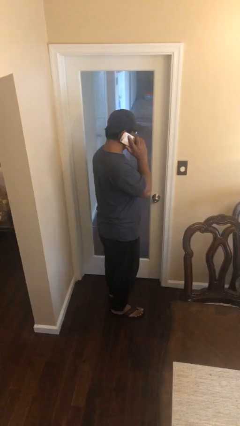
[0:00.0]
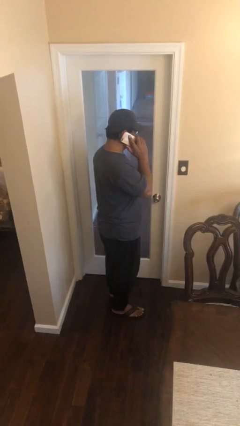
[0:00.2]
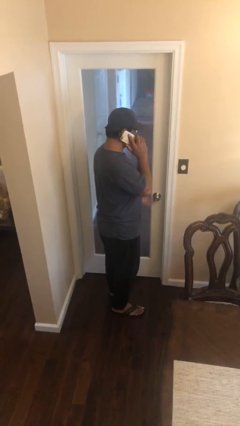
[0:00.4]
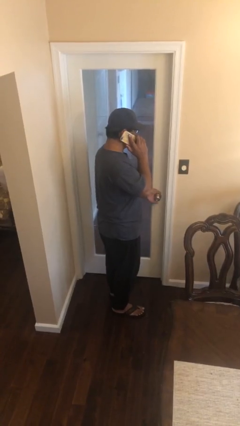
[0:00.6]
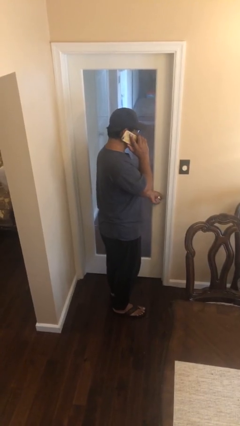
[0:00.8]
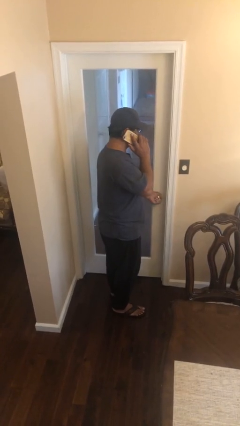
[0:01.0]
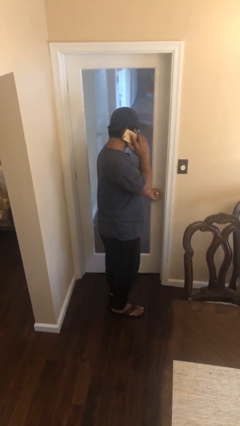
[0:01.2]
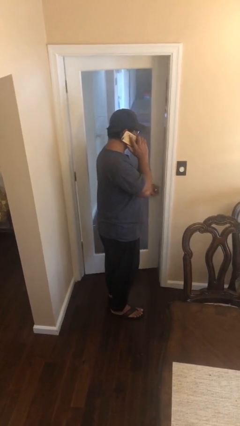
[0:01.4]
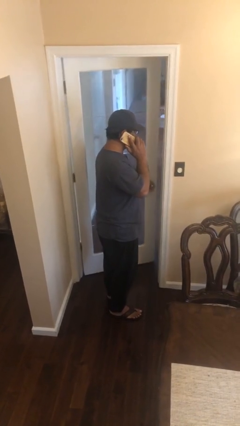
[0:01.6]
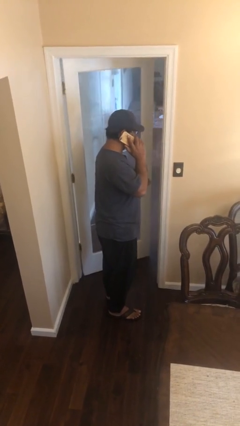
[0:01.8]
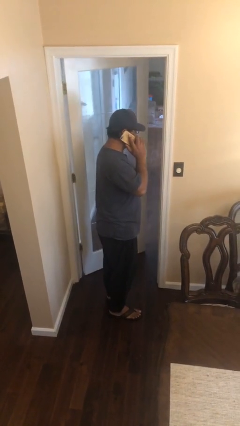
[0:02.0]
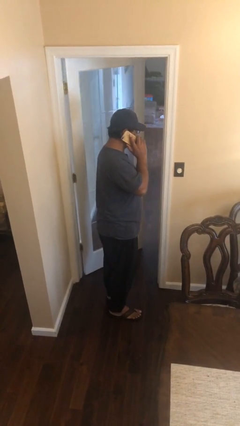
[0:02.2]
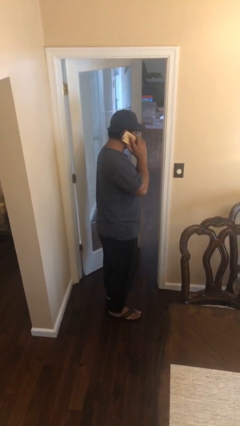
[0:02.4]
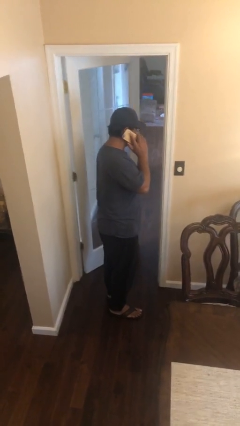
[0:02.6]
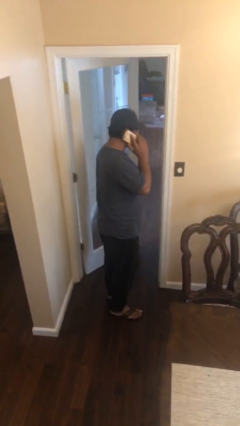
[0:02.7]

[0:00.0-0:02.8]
person opens facility door

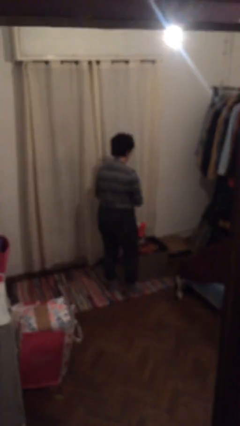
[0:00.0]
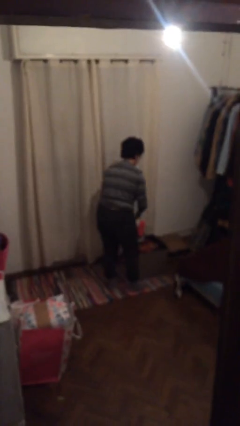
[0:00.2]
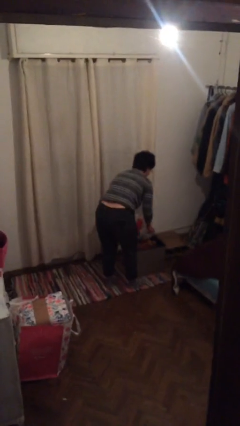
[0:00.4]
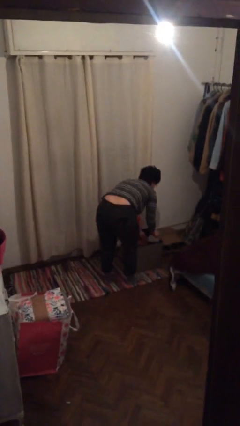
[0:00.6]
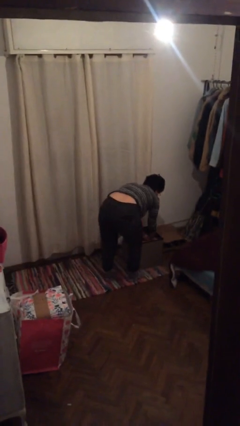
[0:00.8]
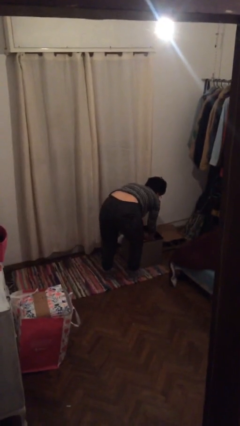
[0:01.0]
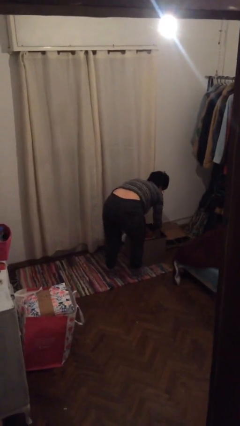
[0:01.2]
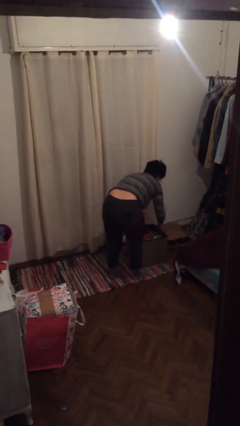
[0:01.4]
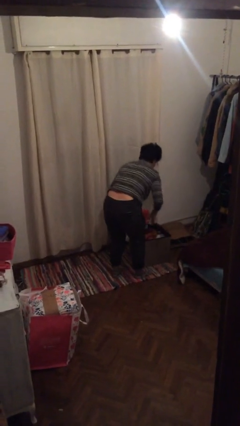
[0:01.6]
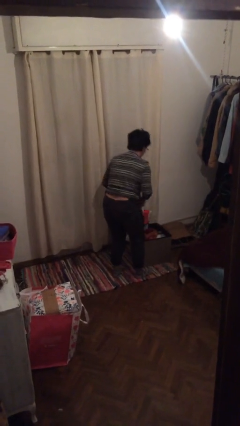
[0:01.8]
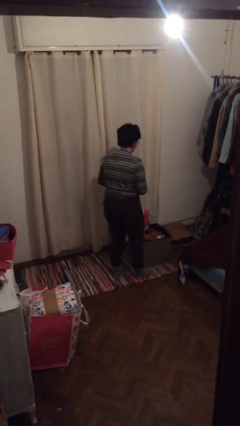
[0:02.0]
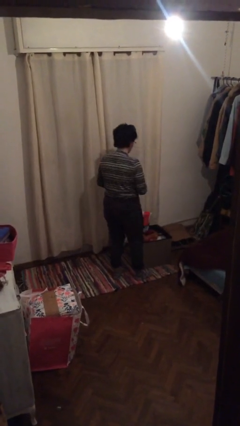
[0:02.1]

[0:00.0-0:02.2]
person puts object into basket

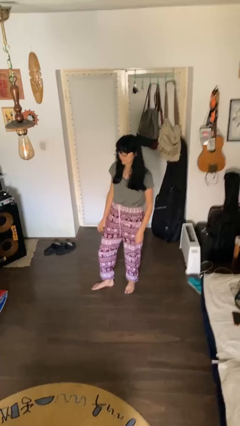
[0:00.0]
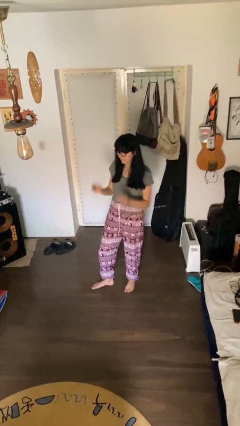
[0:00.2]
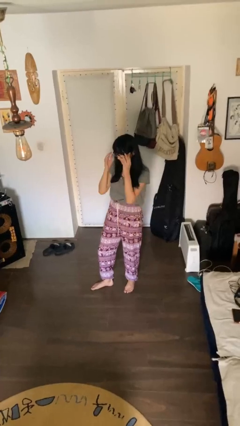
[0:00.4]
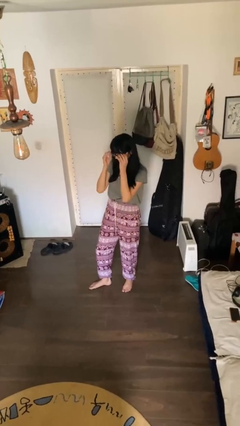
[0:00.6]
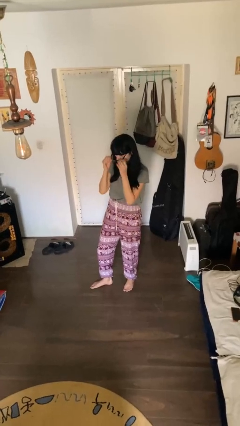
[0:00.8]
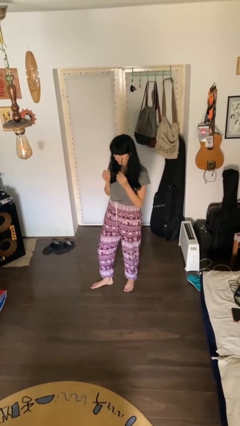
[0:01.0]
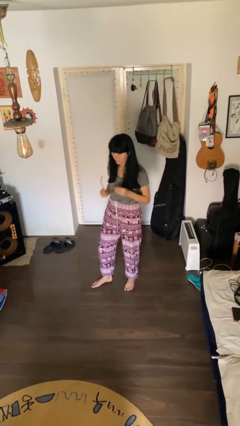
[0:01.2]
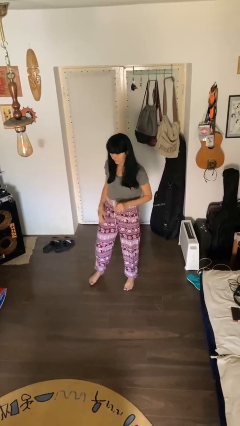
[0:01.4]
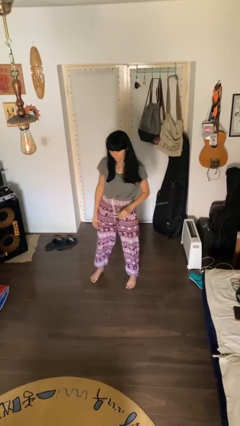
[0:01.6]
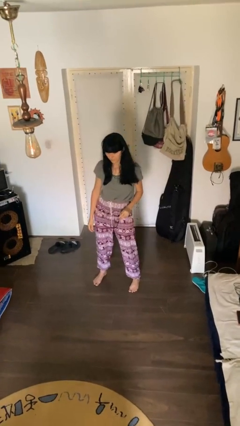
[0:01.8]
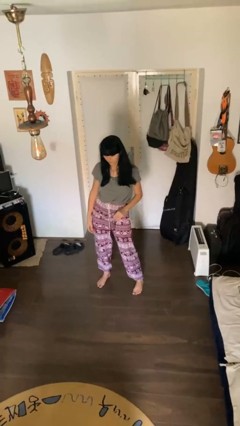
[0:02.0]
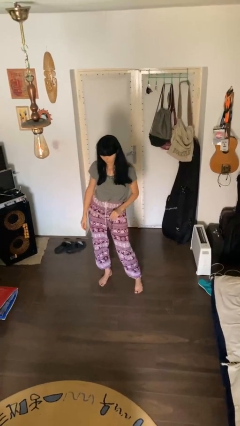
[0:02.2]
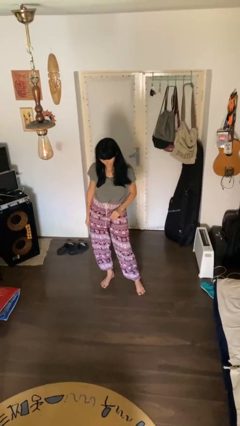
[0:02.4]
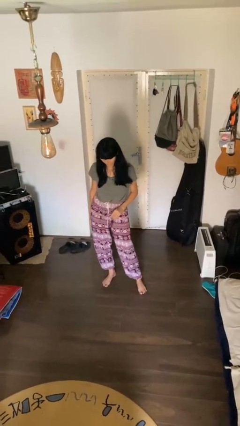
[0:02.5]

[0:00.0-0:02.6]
person takes off glasses

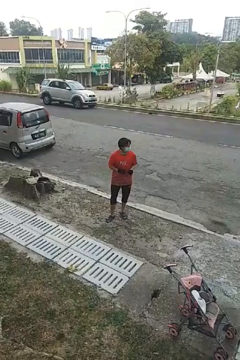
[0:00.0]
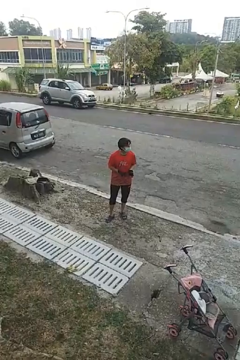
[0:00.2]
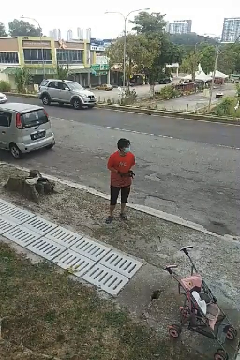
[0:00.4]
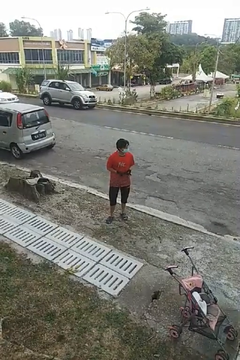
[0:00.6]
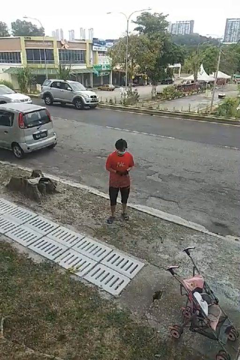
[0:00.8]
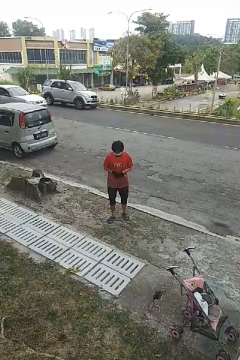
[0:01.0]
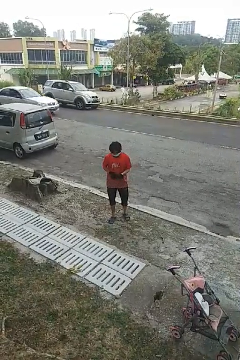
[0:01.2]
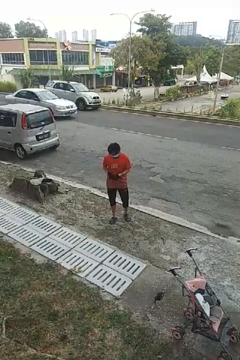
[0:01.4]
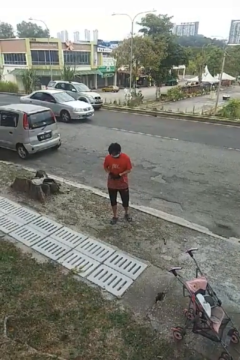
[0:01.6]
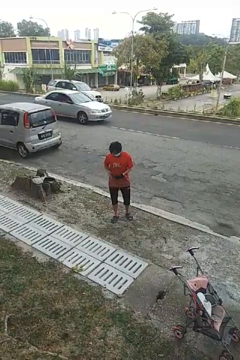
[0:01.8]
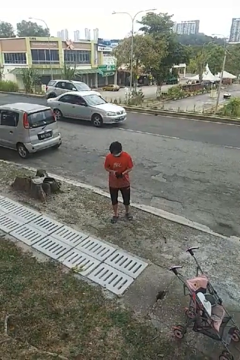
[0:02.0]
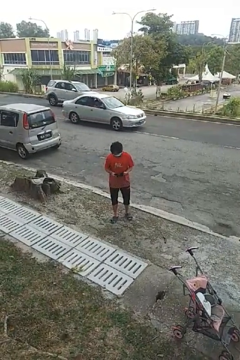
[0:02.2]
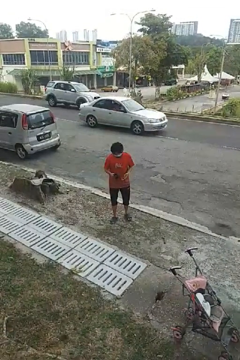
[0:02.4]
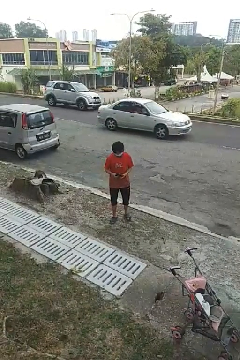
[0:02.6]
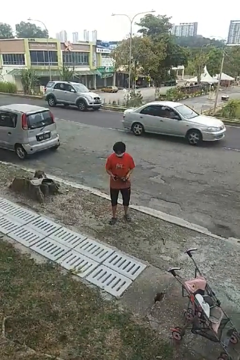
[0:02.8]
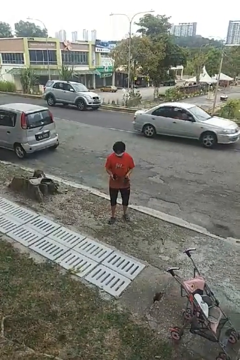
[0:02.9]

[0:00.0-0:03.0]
person takes off gloves

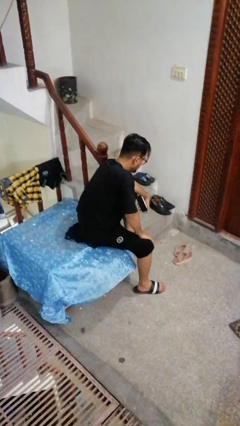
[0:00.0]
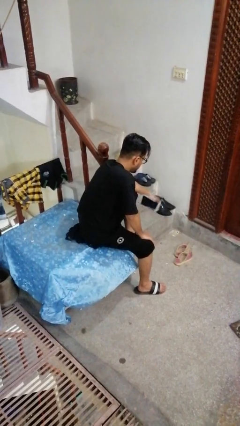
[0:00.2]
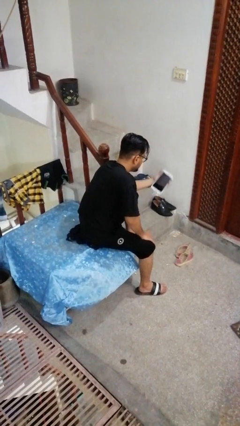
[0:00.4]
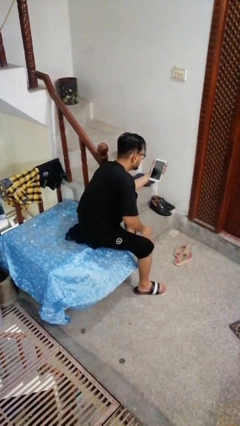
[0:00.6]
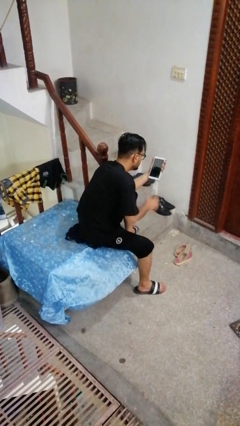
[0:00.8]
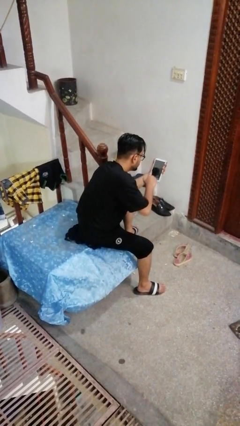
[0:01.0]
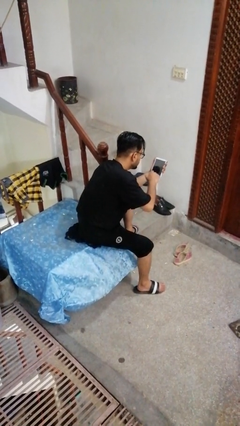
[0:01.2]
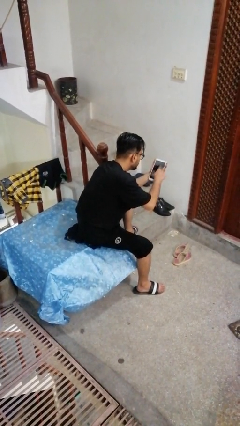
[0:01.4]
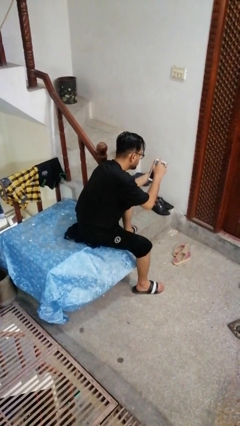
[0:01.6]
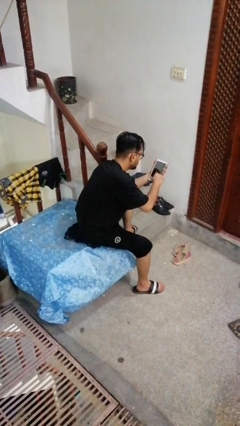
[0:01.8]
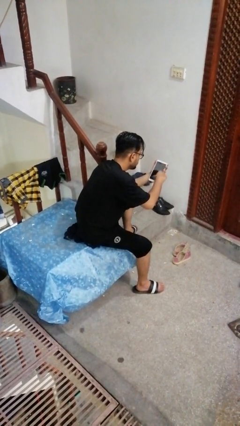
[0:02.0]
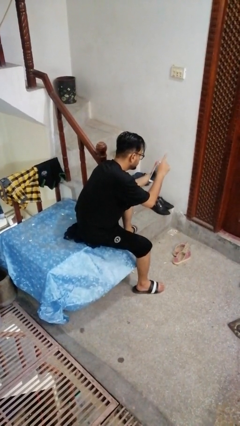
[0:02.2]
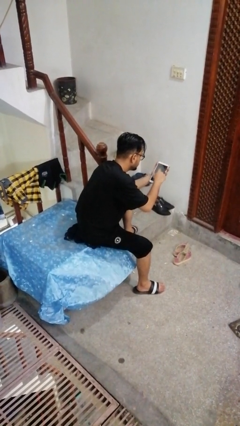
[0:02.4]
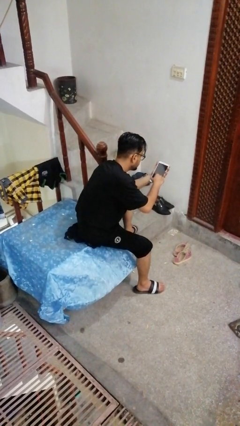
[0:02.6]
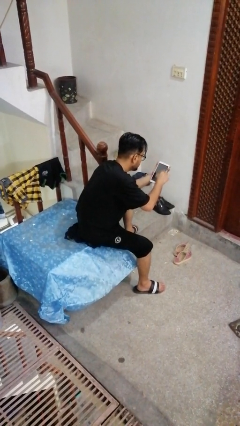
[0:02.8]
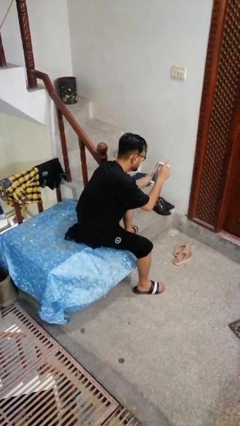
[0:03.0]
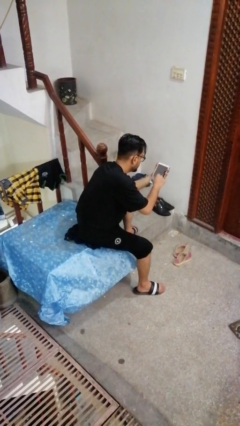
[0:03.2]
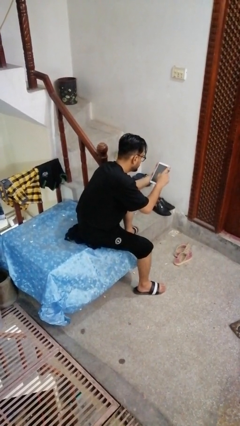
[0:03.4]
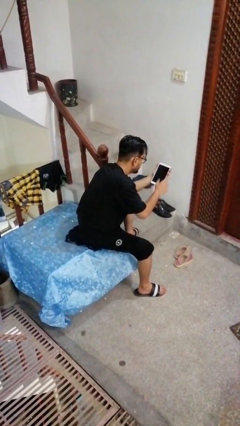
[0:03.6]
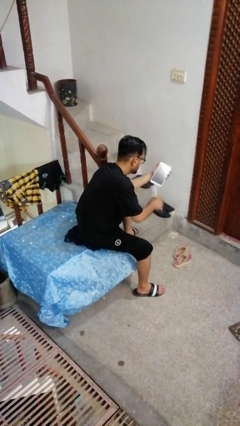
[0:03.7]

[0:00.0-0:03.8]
person interacts with tablet

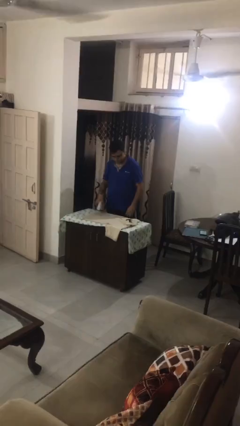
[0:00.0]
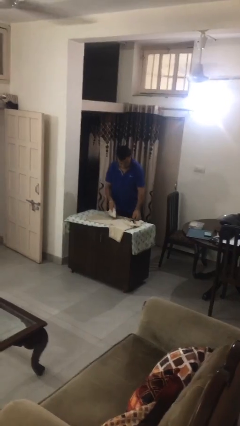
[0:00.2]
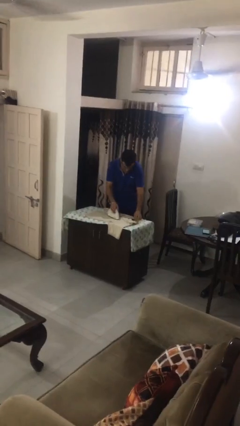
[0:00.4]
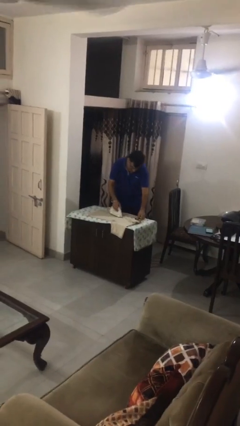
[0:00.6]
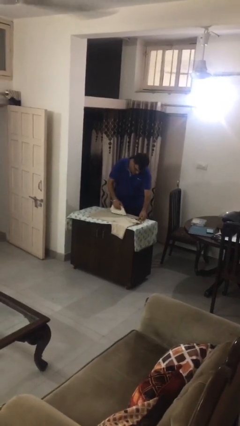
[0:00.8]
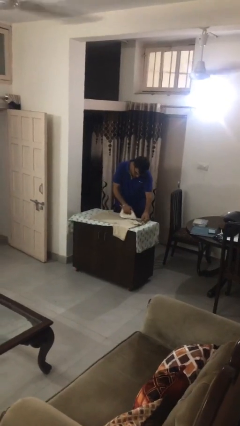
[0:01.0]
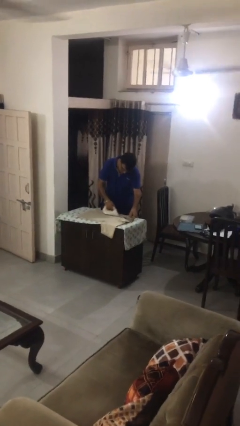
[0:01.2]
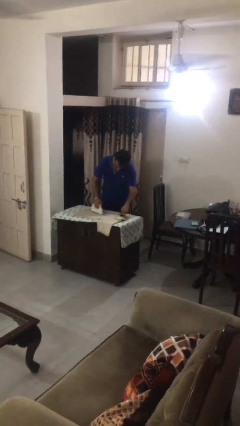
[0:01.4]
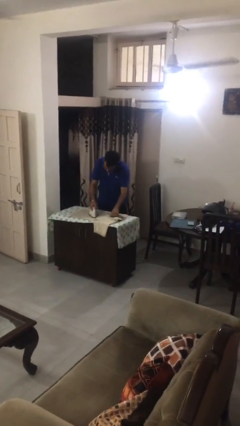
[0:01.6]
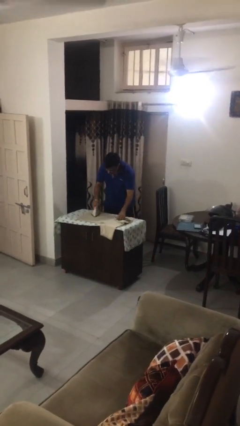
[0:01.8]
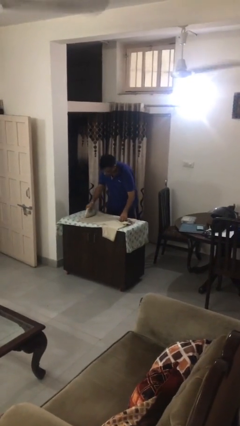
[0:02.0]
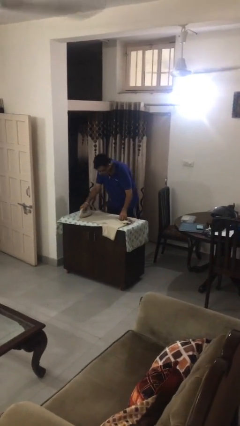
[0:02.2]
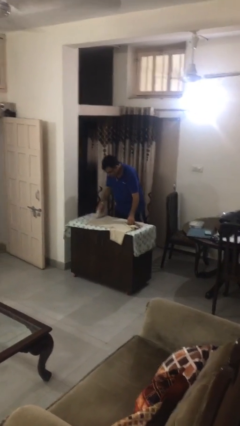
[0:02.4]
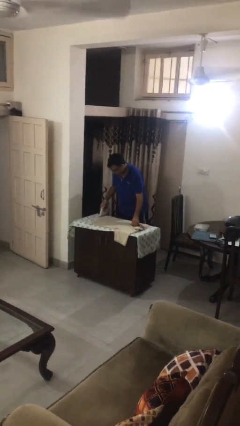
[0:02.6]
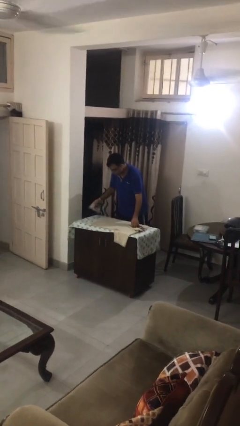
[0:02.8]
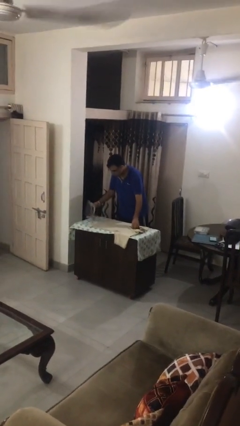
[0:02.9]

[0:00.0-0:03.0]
person irons clothes

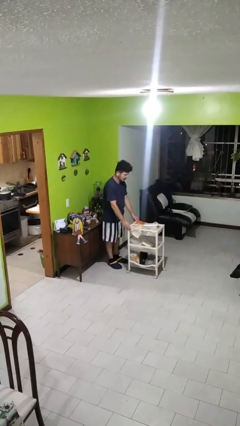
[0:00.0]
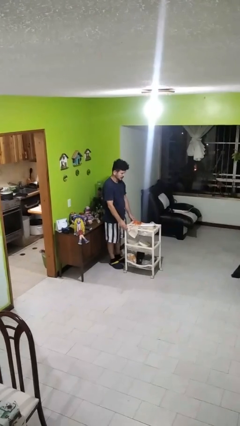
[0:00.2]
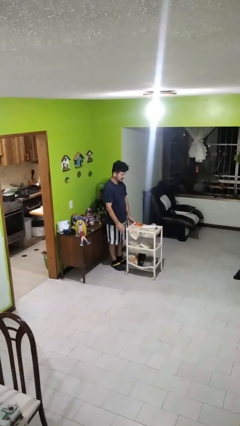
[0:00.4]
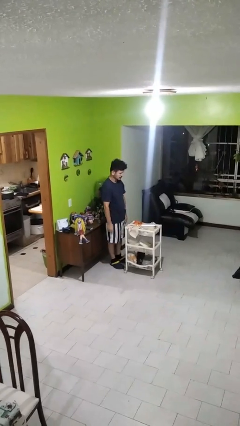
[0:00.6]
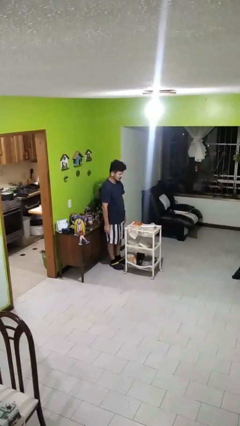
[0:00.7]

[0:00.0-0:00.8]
person pulls wheeled cart
